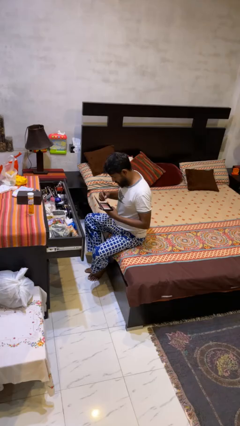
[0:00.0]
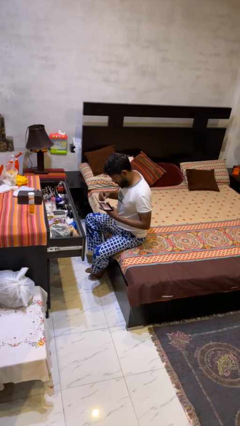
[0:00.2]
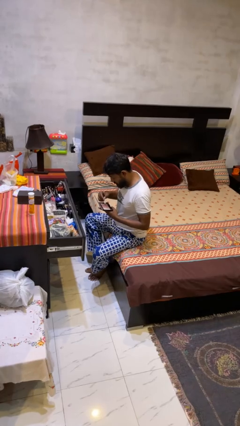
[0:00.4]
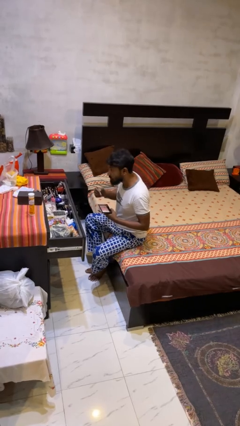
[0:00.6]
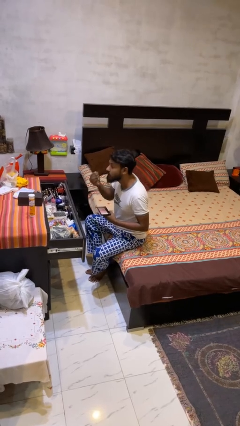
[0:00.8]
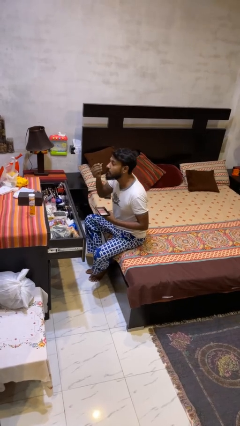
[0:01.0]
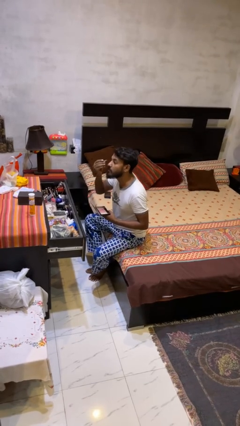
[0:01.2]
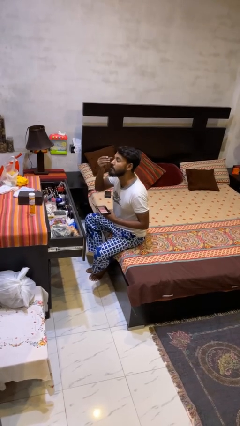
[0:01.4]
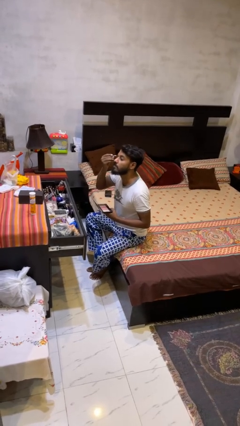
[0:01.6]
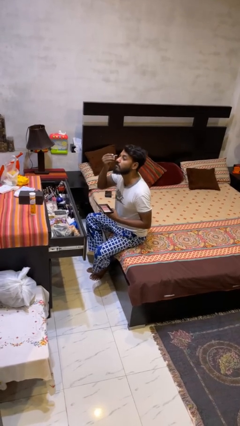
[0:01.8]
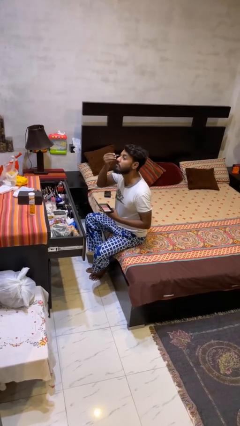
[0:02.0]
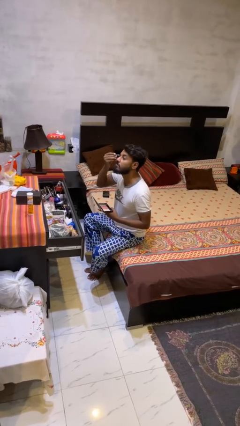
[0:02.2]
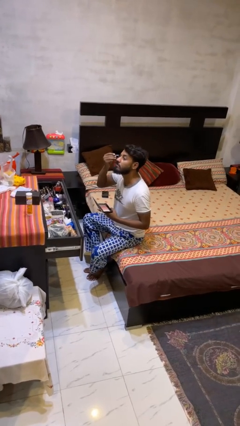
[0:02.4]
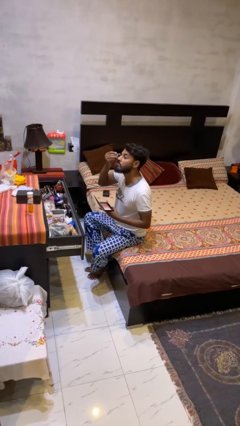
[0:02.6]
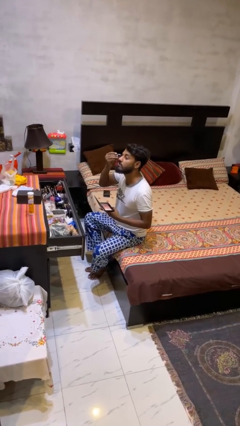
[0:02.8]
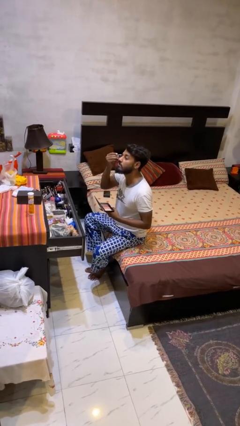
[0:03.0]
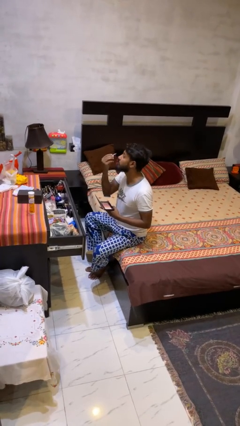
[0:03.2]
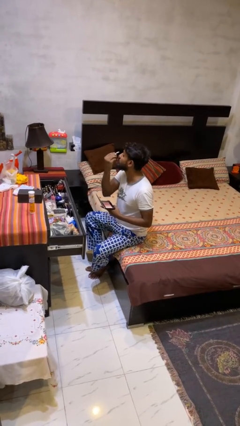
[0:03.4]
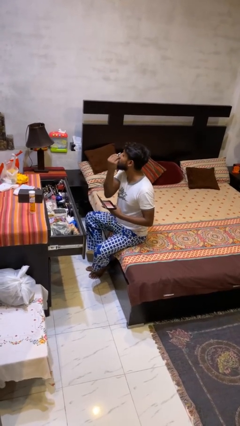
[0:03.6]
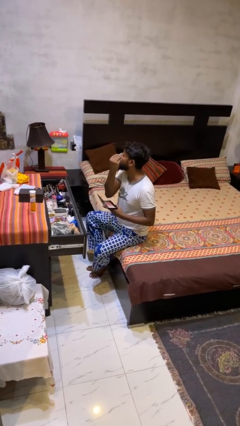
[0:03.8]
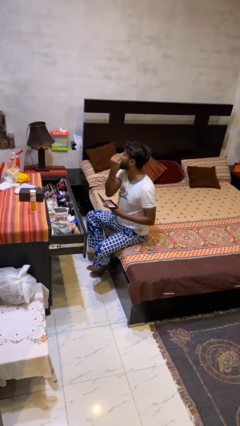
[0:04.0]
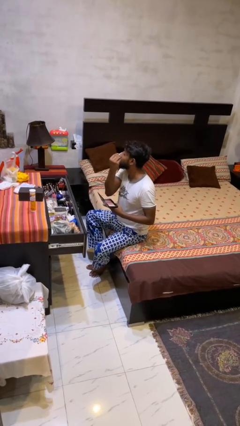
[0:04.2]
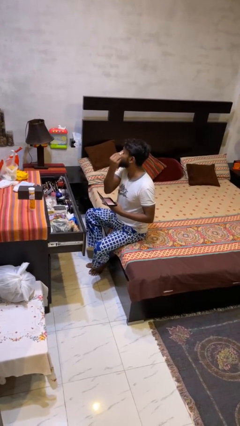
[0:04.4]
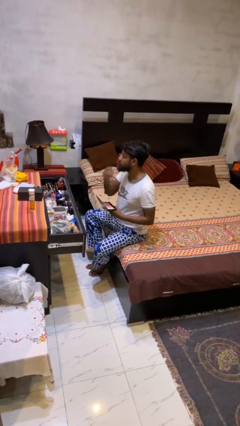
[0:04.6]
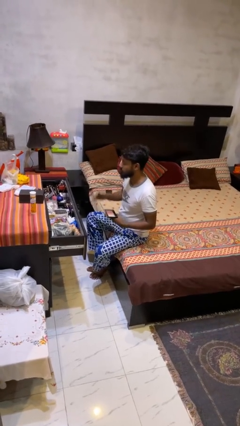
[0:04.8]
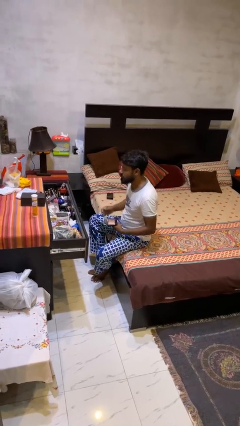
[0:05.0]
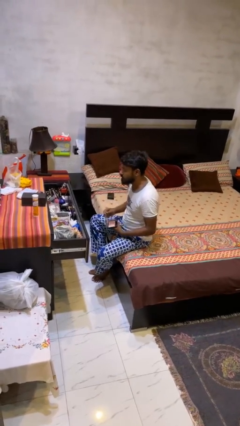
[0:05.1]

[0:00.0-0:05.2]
person applies eye makeup

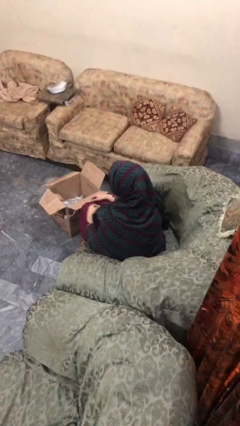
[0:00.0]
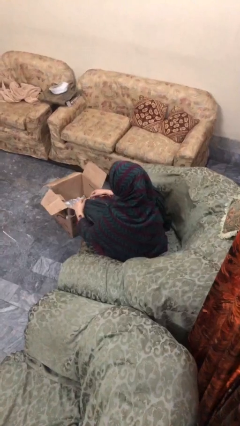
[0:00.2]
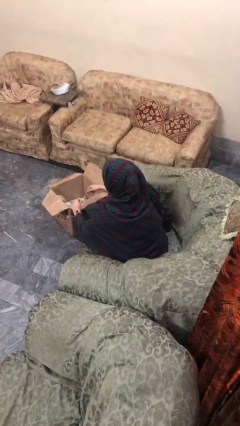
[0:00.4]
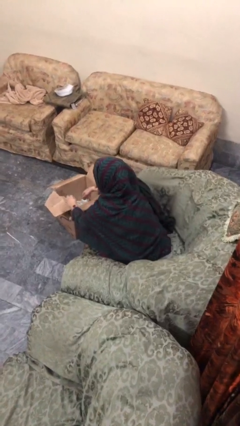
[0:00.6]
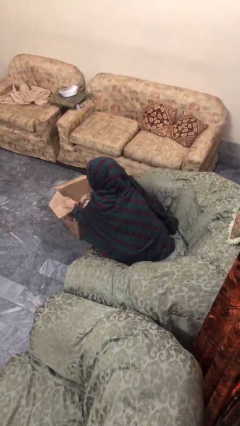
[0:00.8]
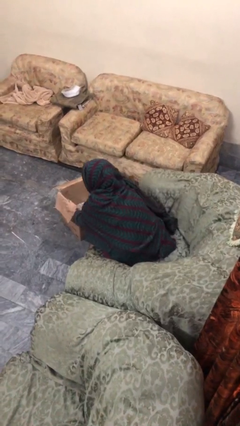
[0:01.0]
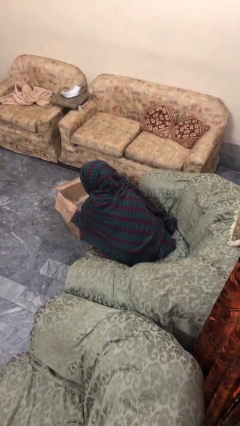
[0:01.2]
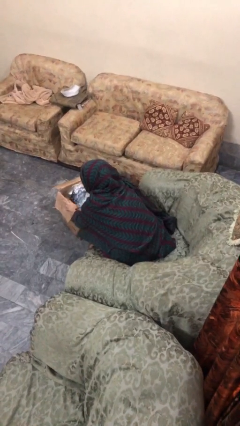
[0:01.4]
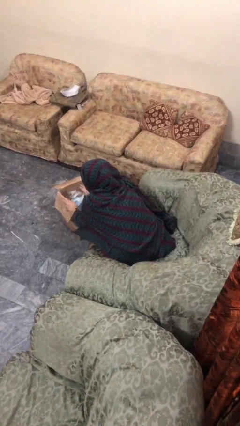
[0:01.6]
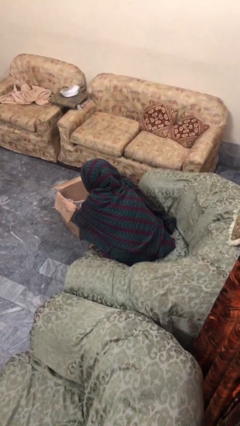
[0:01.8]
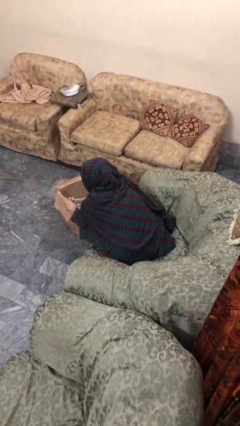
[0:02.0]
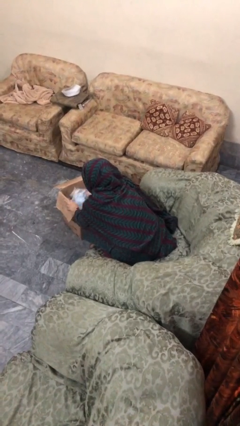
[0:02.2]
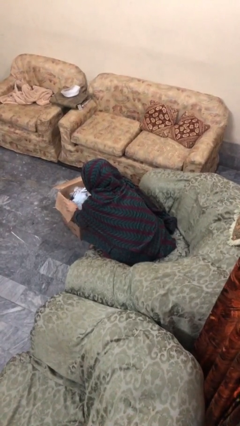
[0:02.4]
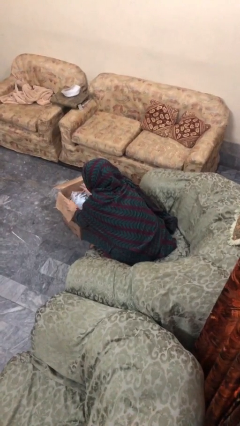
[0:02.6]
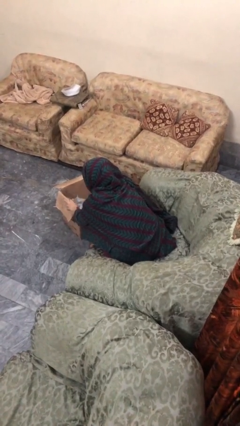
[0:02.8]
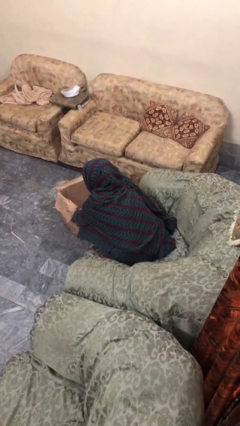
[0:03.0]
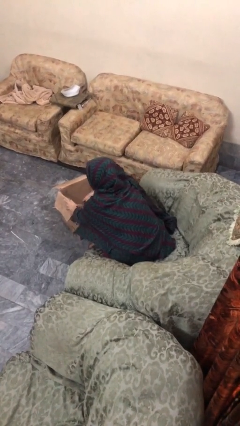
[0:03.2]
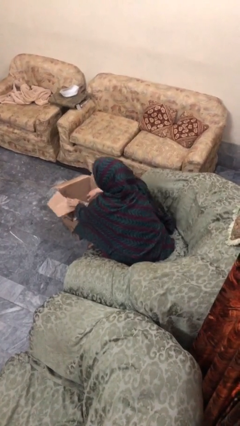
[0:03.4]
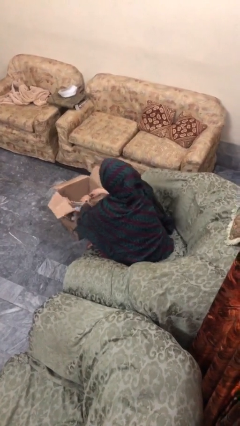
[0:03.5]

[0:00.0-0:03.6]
person searches in box

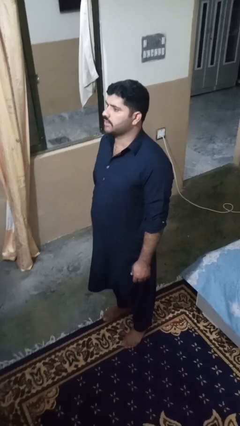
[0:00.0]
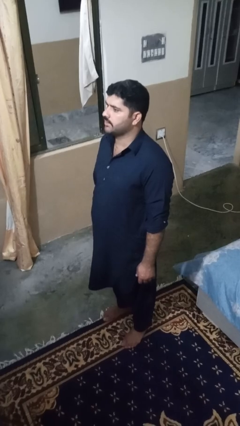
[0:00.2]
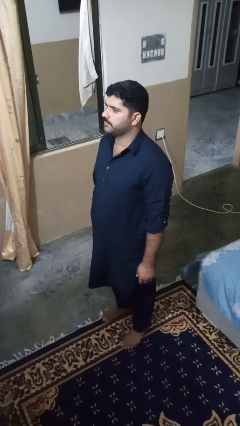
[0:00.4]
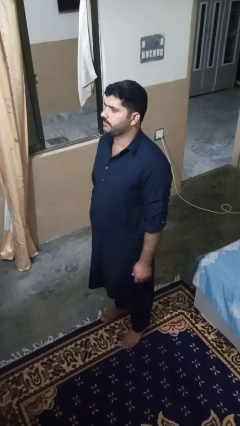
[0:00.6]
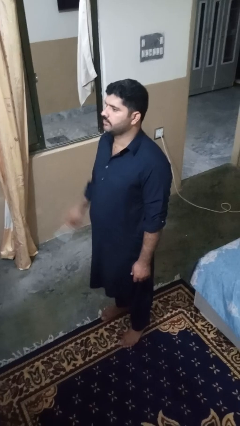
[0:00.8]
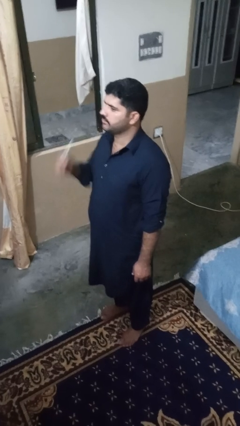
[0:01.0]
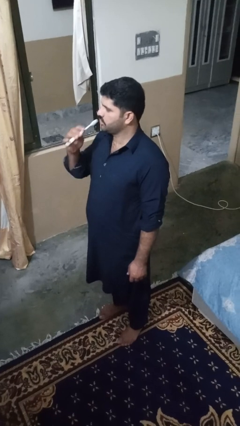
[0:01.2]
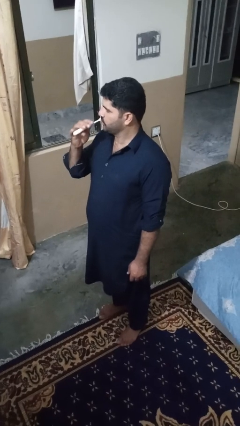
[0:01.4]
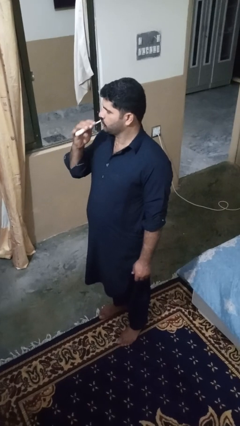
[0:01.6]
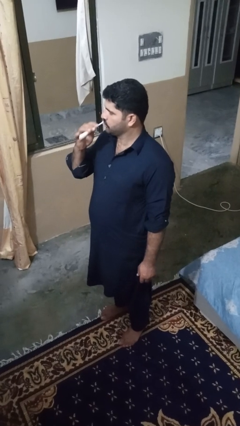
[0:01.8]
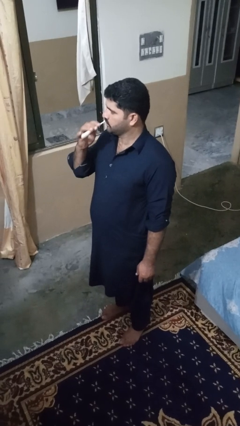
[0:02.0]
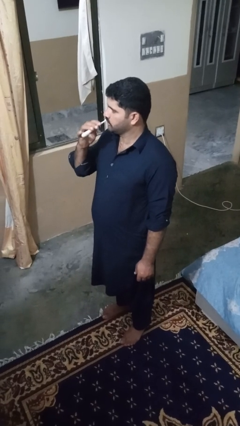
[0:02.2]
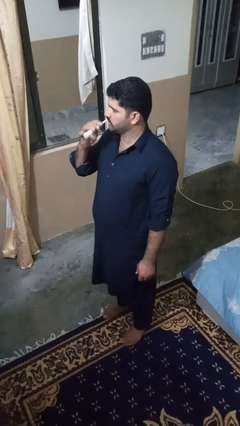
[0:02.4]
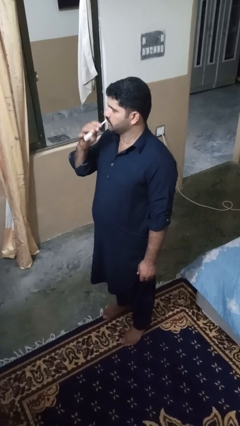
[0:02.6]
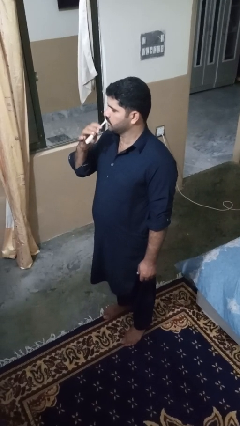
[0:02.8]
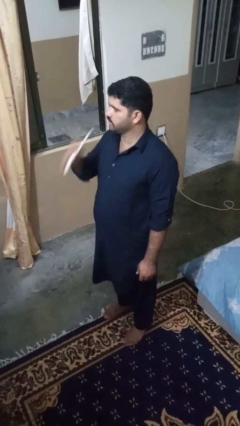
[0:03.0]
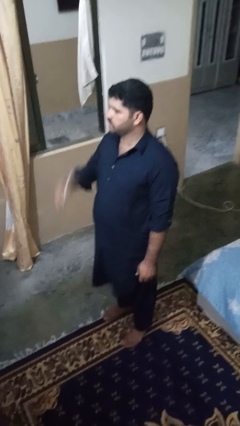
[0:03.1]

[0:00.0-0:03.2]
person brushes teeth

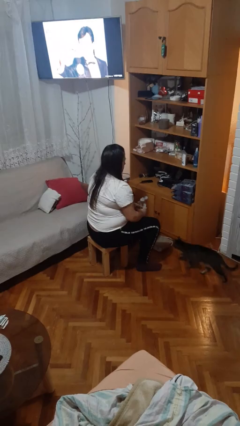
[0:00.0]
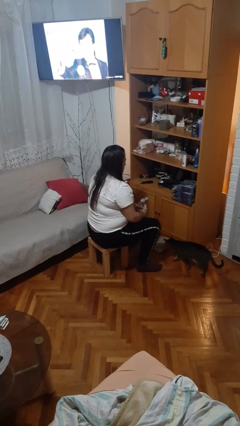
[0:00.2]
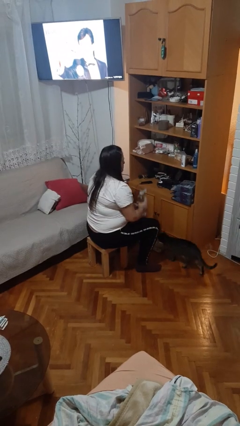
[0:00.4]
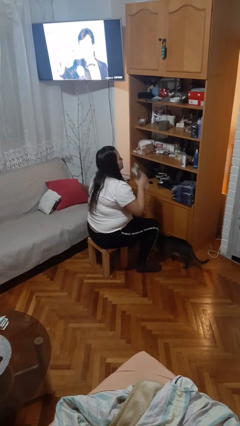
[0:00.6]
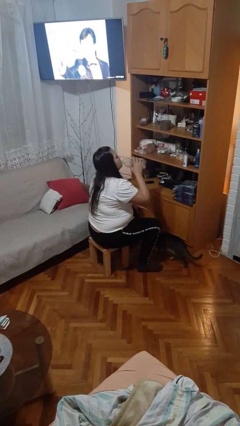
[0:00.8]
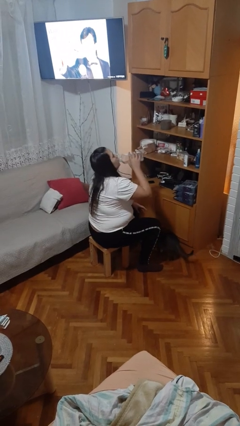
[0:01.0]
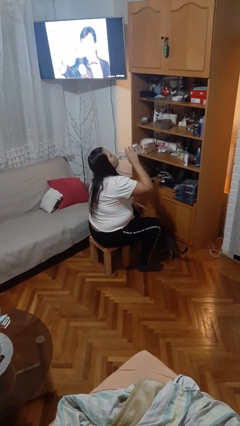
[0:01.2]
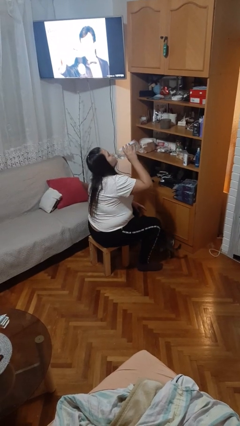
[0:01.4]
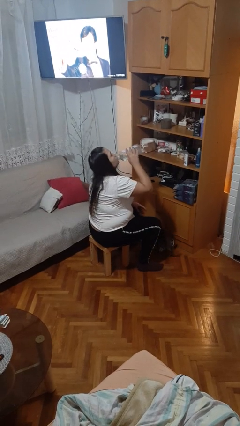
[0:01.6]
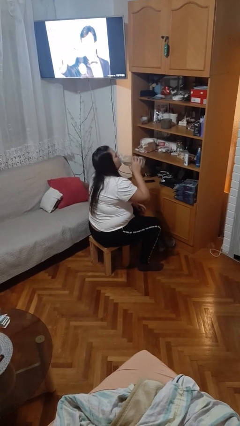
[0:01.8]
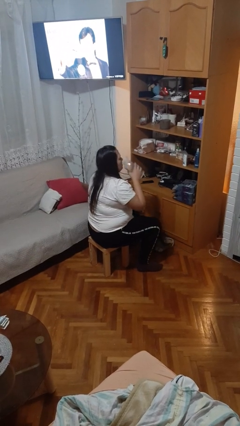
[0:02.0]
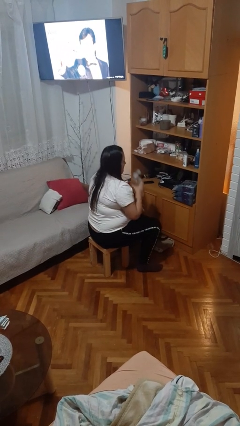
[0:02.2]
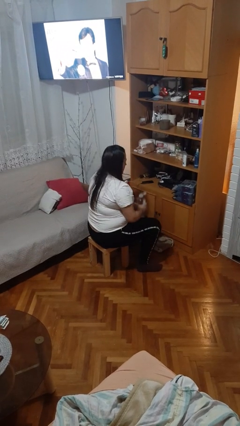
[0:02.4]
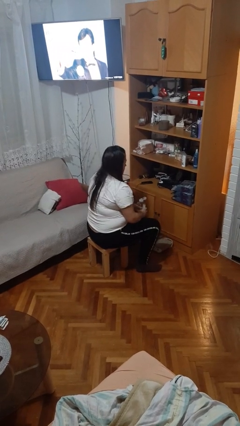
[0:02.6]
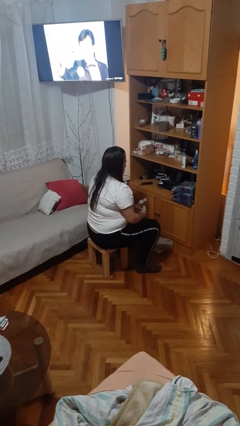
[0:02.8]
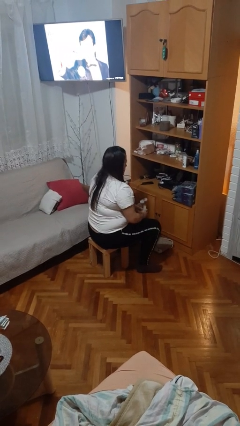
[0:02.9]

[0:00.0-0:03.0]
person drinks from bottle

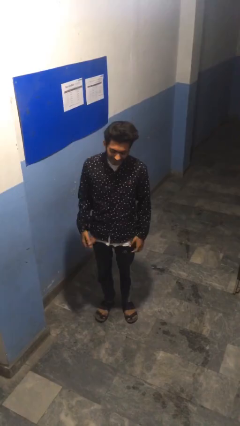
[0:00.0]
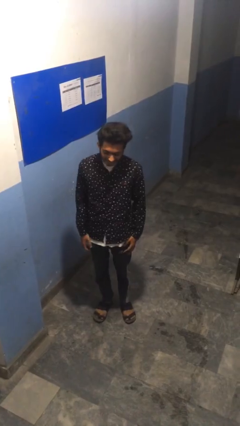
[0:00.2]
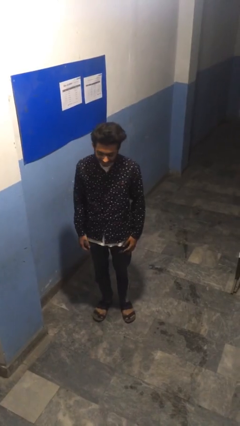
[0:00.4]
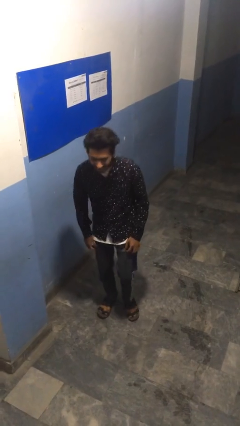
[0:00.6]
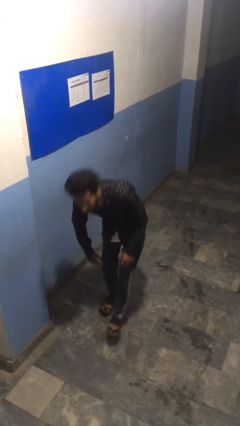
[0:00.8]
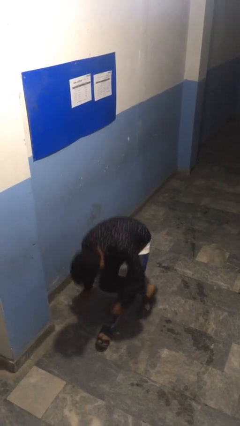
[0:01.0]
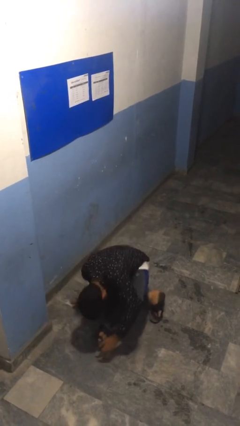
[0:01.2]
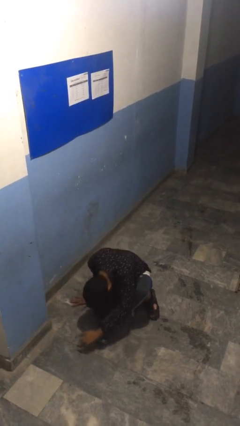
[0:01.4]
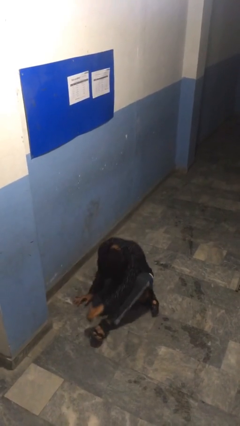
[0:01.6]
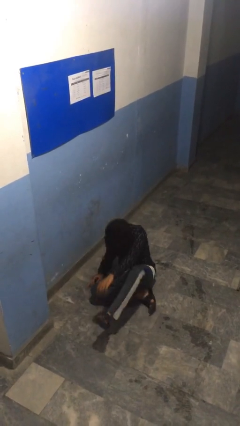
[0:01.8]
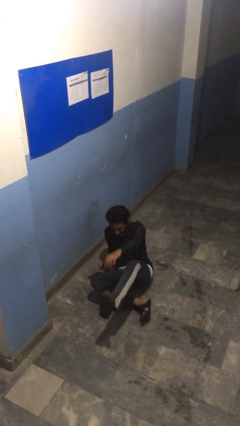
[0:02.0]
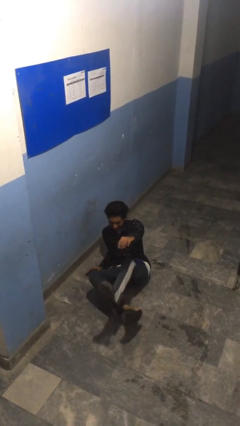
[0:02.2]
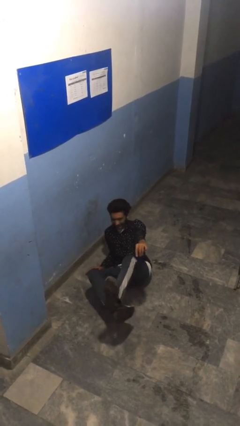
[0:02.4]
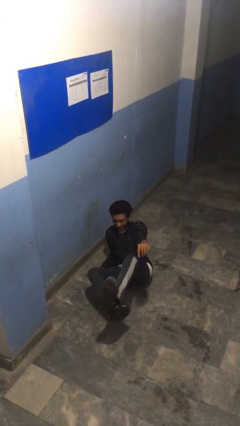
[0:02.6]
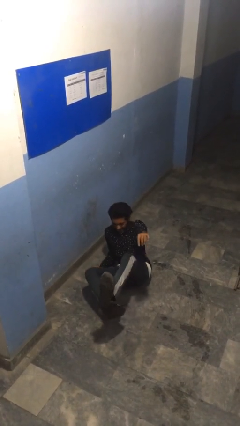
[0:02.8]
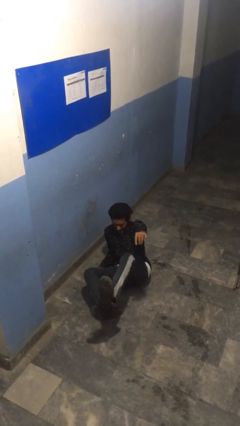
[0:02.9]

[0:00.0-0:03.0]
person falls while standing
